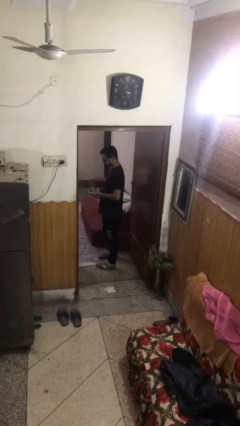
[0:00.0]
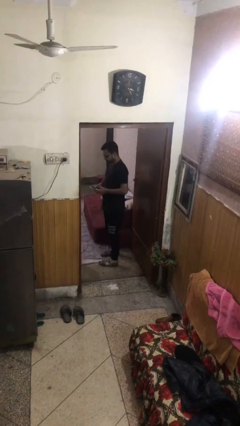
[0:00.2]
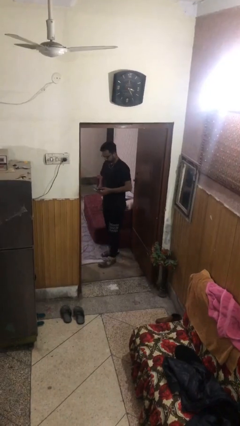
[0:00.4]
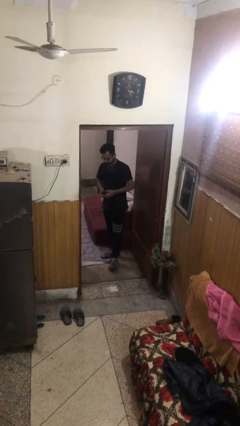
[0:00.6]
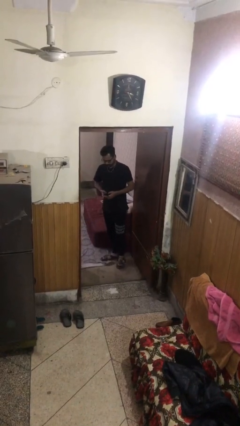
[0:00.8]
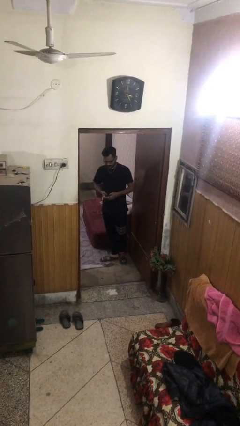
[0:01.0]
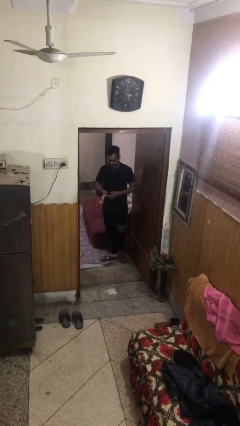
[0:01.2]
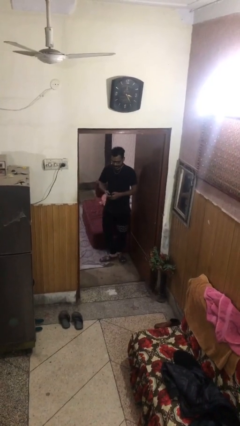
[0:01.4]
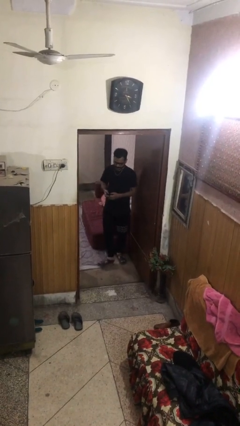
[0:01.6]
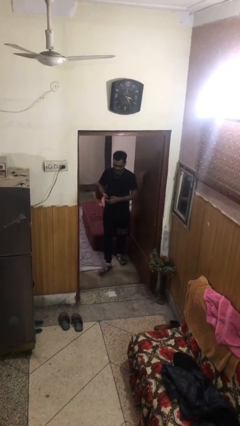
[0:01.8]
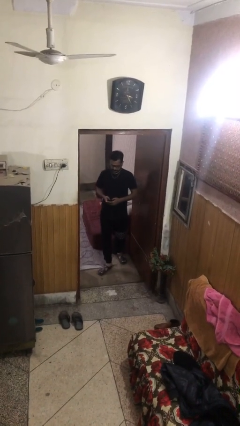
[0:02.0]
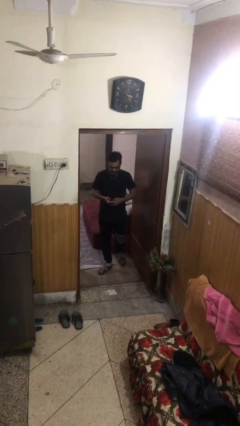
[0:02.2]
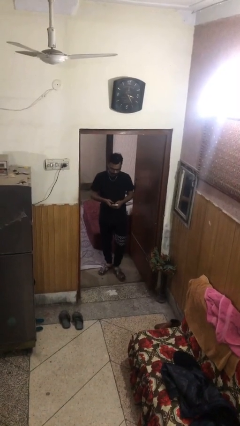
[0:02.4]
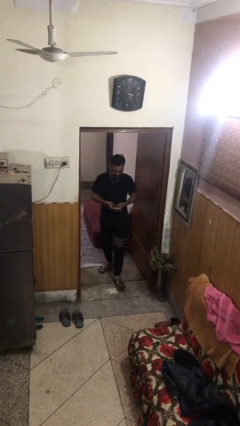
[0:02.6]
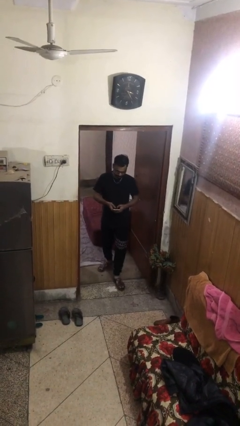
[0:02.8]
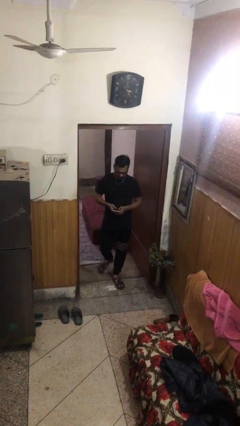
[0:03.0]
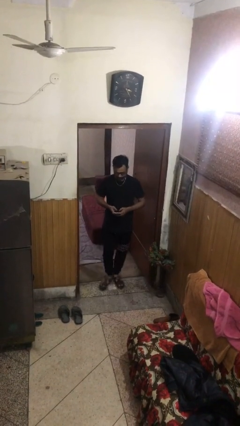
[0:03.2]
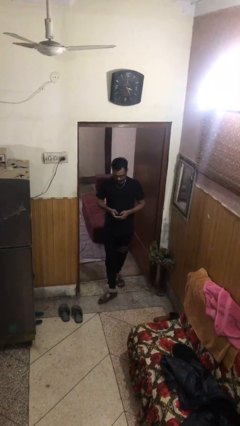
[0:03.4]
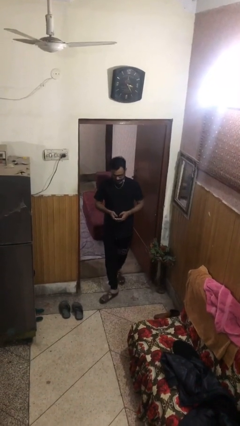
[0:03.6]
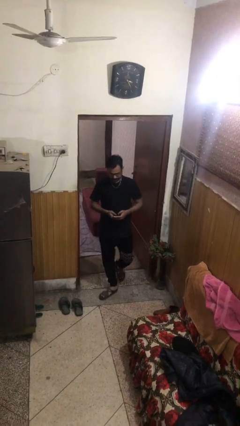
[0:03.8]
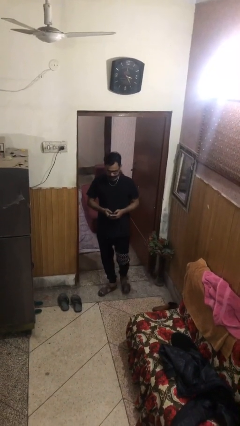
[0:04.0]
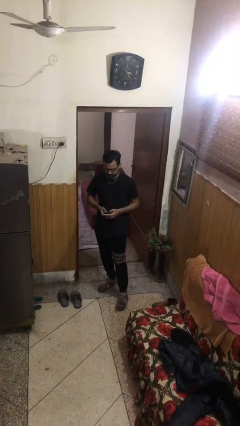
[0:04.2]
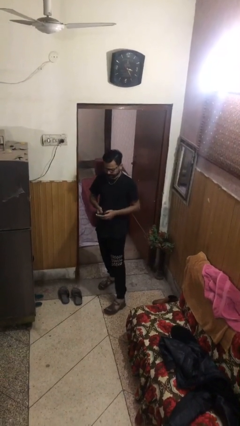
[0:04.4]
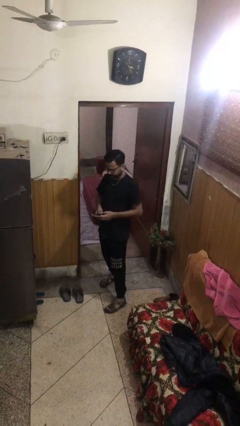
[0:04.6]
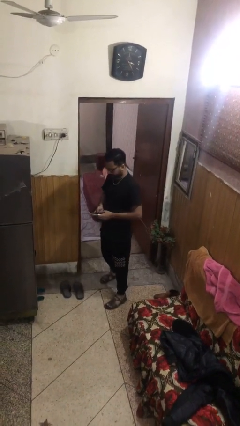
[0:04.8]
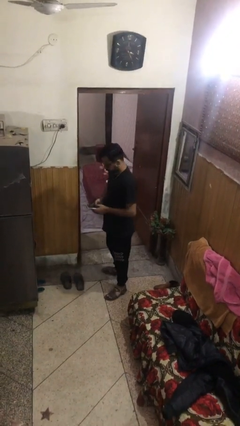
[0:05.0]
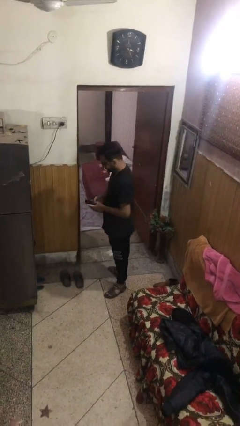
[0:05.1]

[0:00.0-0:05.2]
person enters scene through structure

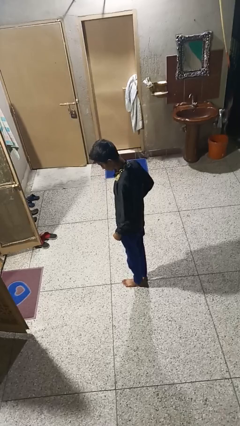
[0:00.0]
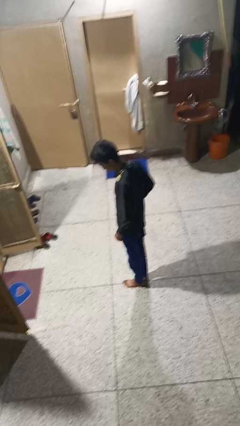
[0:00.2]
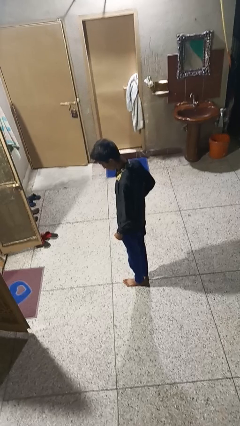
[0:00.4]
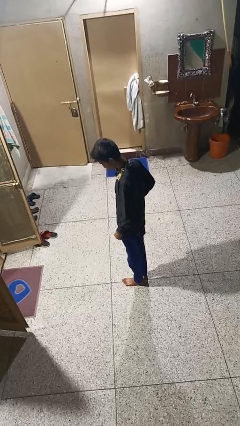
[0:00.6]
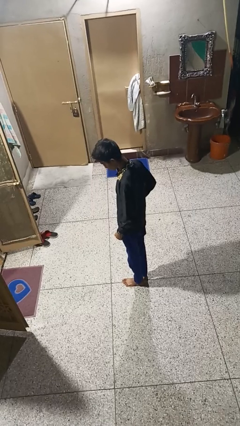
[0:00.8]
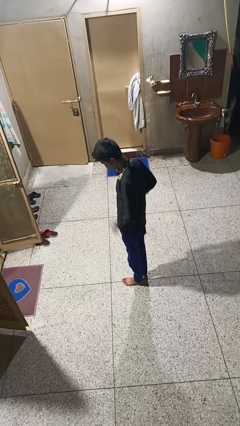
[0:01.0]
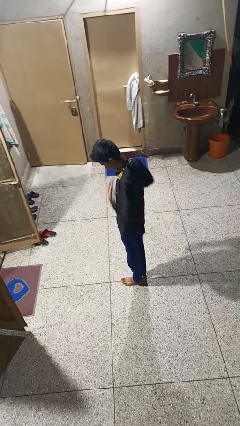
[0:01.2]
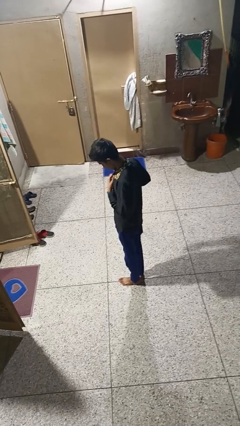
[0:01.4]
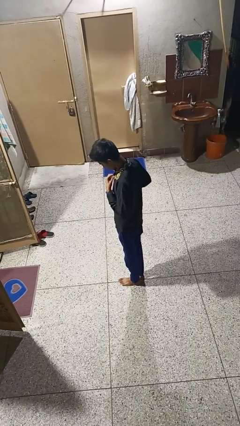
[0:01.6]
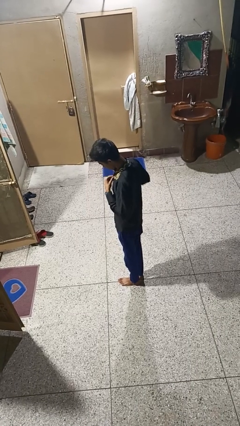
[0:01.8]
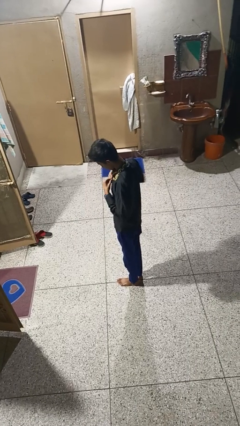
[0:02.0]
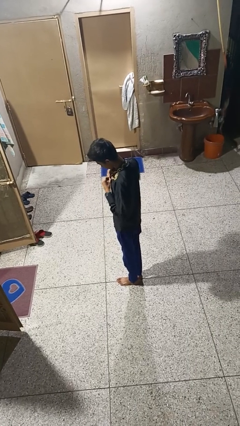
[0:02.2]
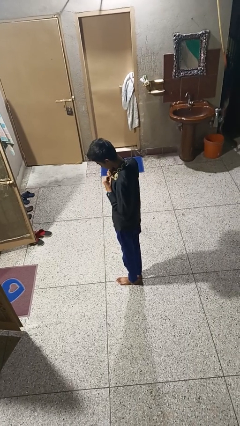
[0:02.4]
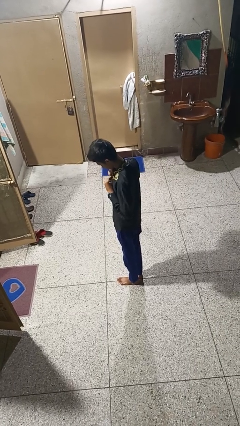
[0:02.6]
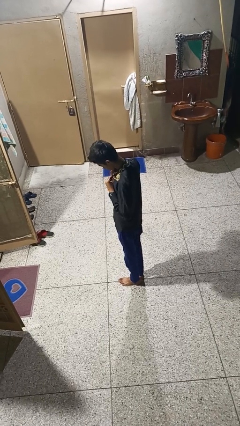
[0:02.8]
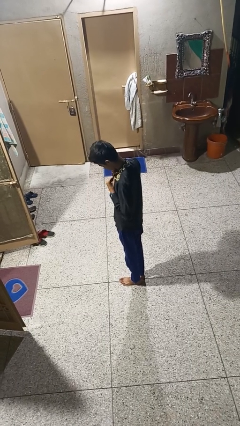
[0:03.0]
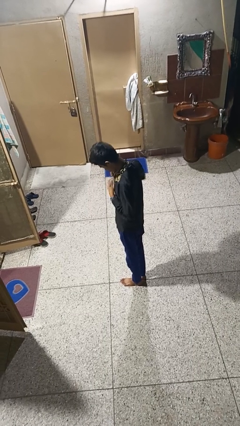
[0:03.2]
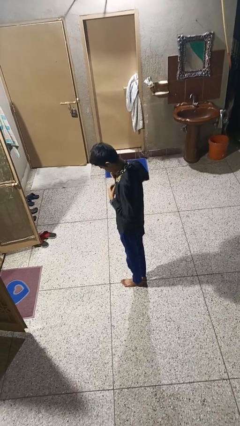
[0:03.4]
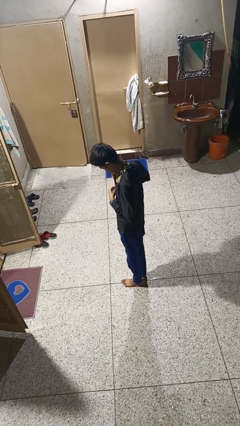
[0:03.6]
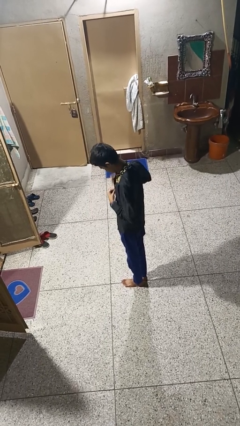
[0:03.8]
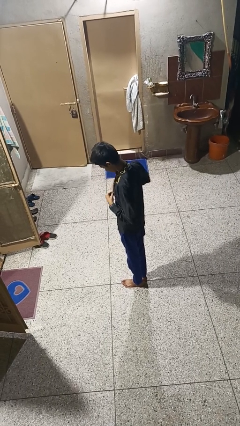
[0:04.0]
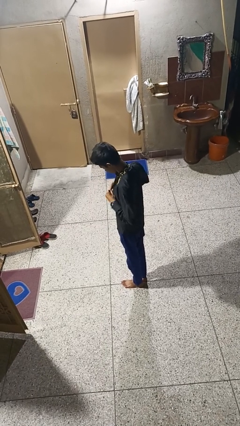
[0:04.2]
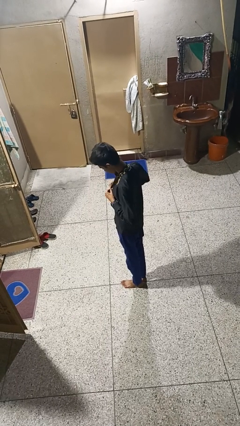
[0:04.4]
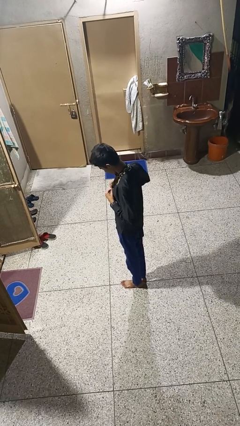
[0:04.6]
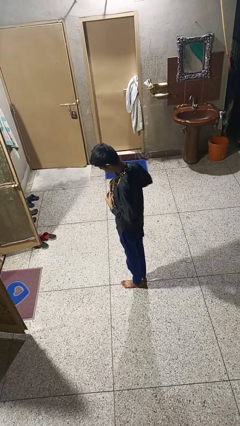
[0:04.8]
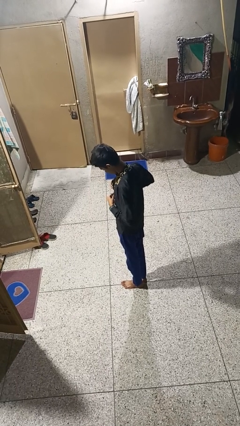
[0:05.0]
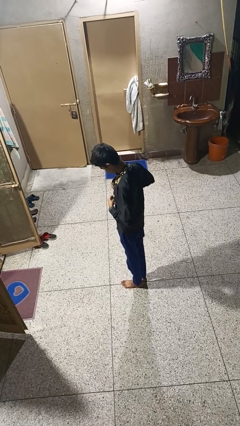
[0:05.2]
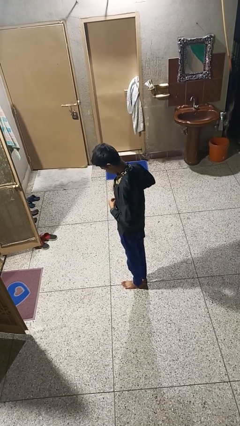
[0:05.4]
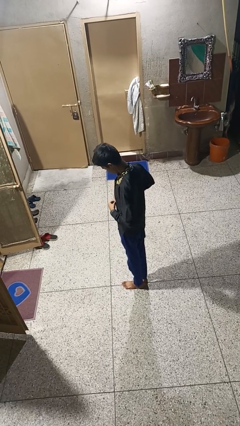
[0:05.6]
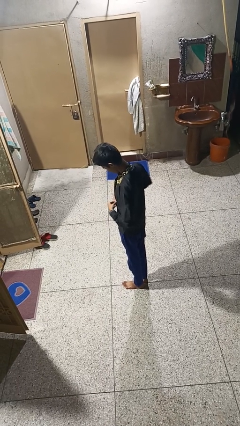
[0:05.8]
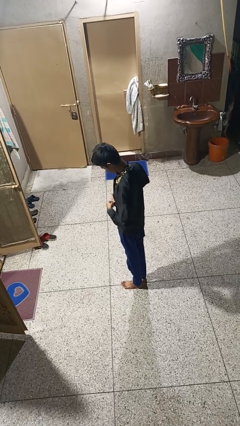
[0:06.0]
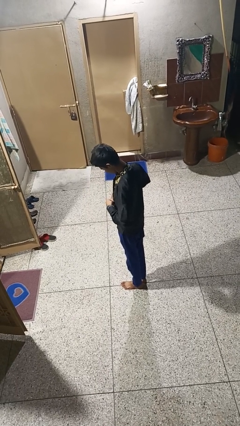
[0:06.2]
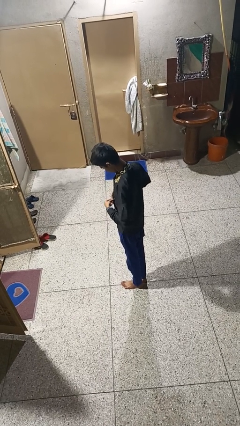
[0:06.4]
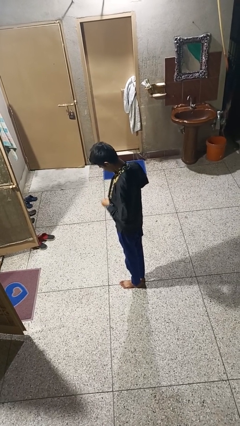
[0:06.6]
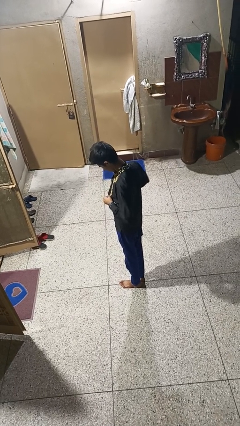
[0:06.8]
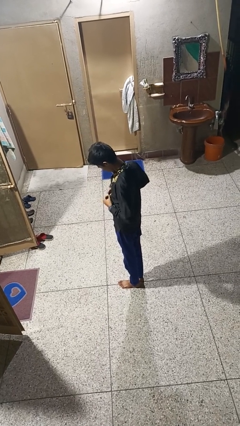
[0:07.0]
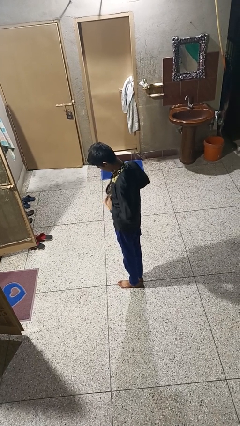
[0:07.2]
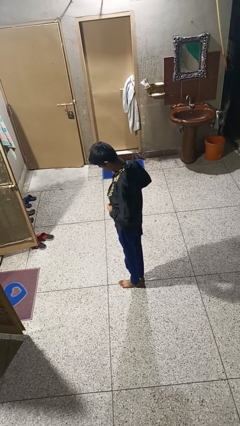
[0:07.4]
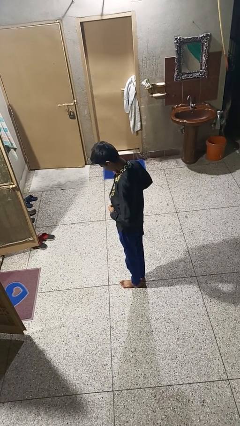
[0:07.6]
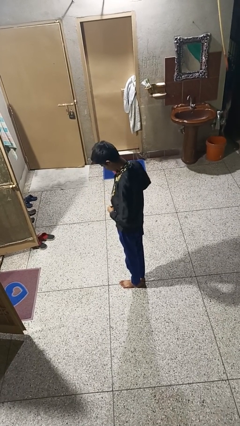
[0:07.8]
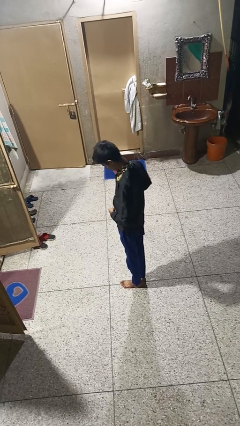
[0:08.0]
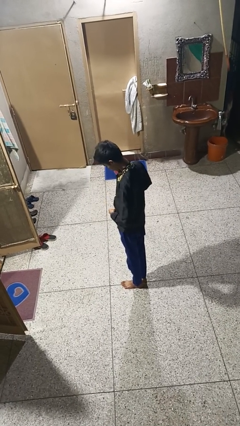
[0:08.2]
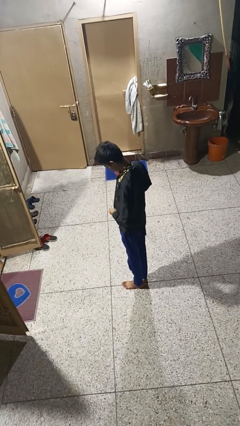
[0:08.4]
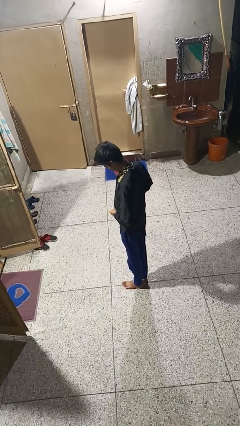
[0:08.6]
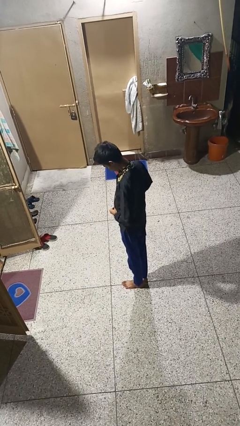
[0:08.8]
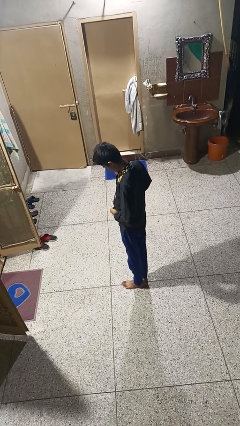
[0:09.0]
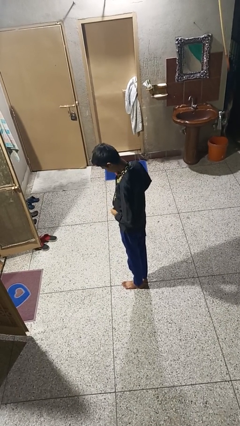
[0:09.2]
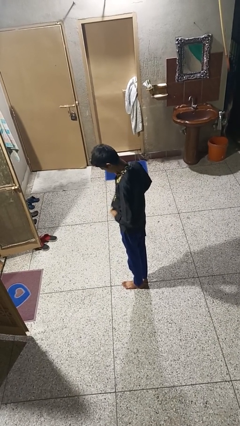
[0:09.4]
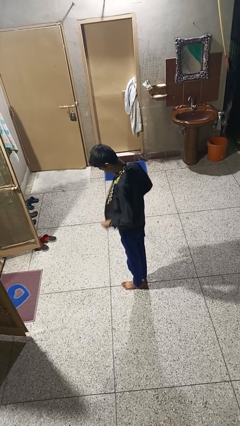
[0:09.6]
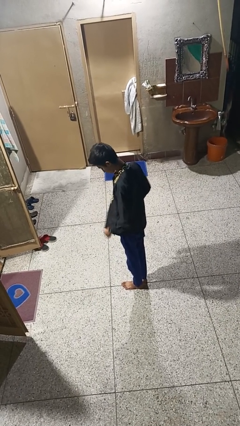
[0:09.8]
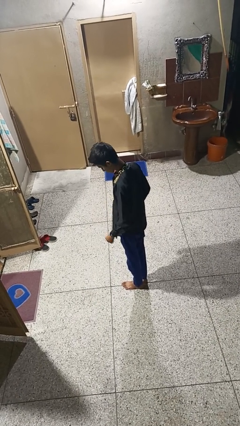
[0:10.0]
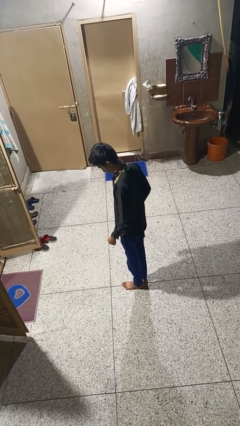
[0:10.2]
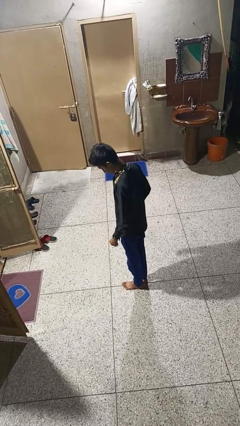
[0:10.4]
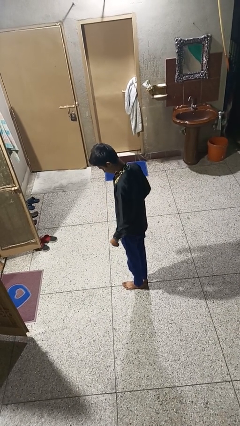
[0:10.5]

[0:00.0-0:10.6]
person unbuttons shirt

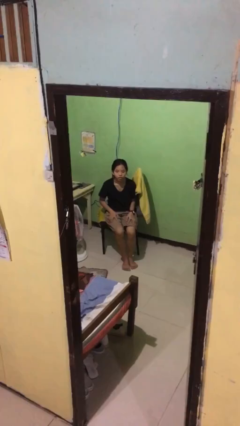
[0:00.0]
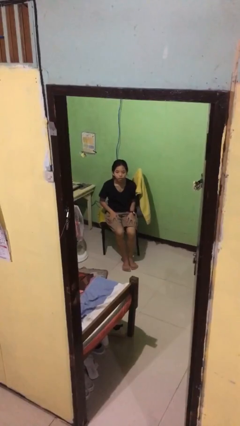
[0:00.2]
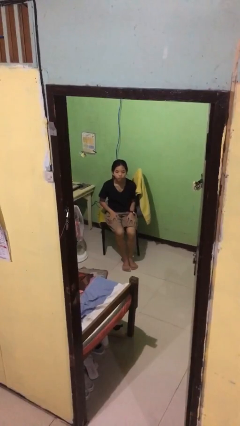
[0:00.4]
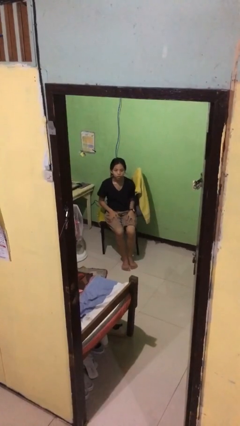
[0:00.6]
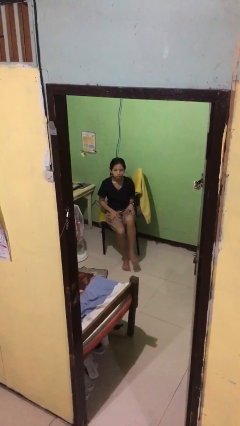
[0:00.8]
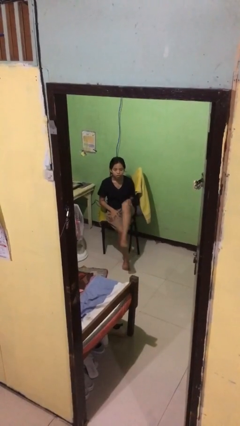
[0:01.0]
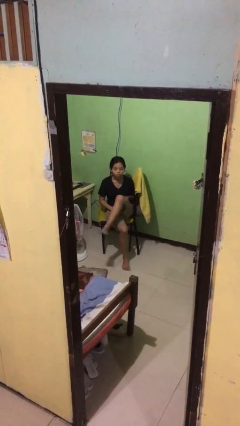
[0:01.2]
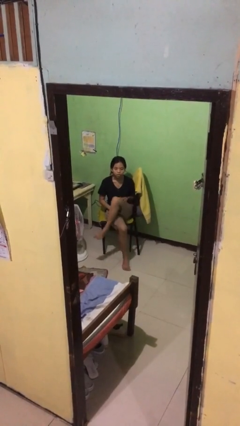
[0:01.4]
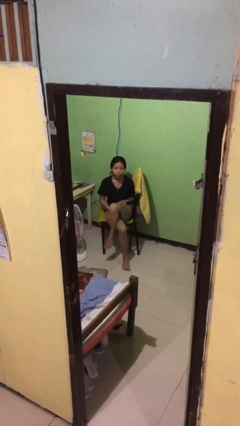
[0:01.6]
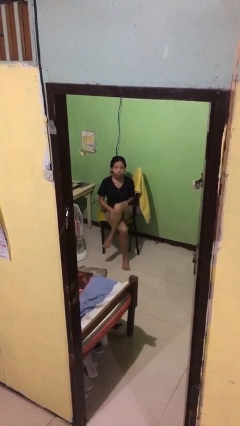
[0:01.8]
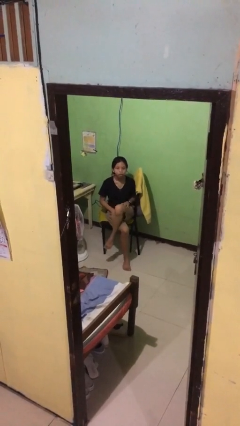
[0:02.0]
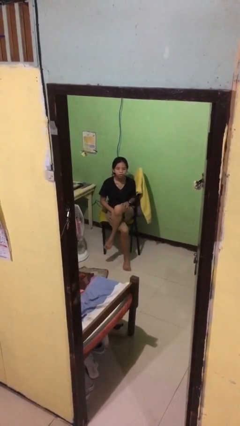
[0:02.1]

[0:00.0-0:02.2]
person crosses legs
